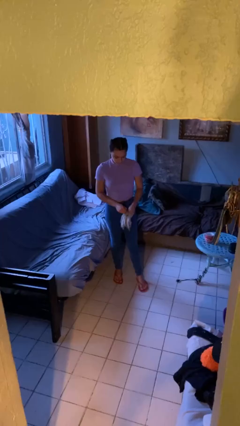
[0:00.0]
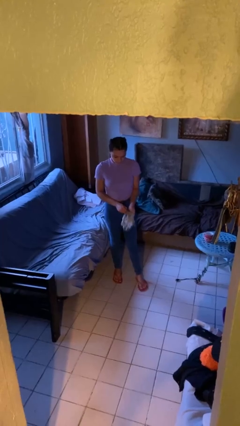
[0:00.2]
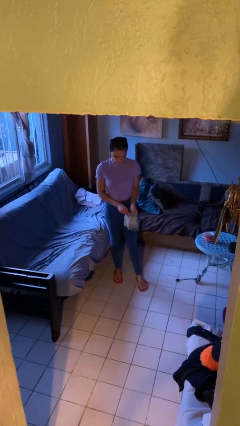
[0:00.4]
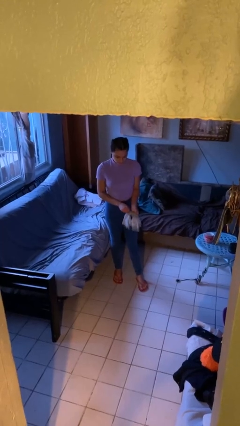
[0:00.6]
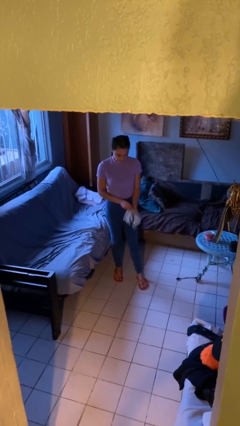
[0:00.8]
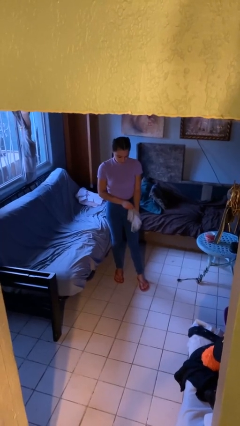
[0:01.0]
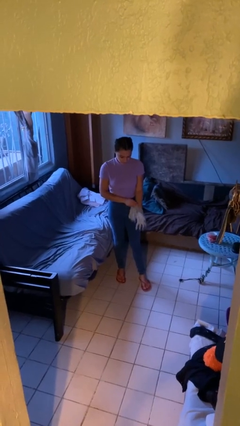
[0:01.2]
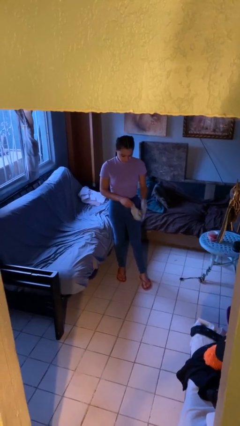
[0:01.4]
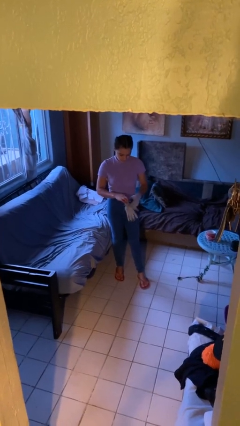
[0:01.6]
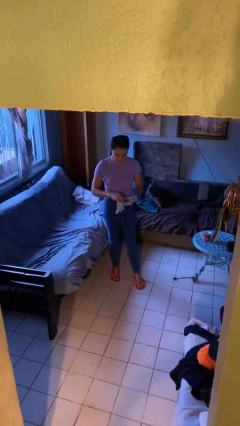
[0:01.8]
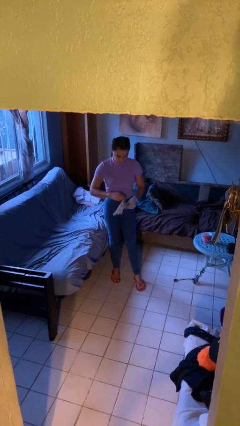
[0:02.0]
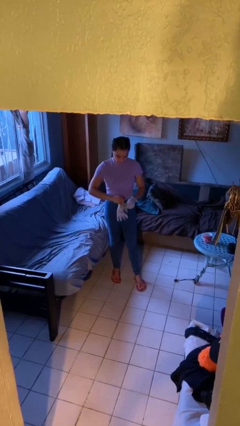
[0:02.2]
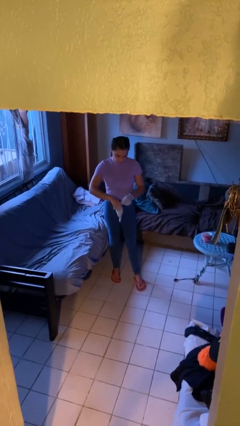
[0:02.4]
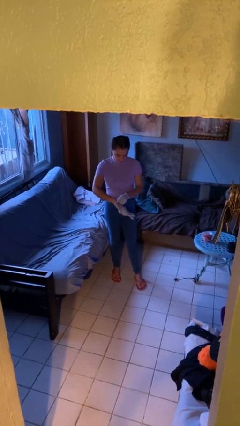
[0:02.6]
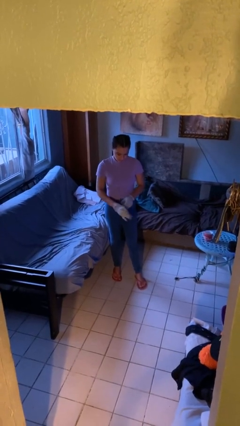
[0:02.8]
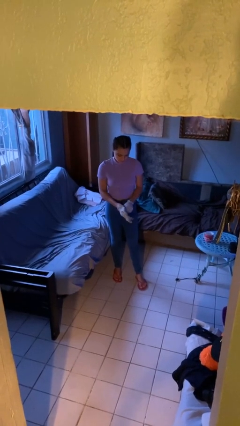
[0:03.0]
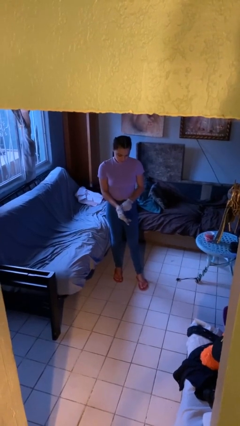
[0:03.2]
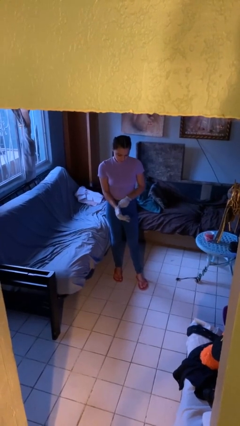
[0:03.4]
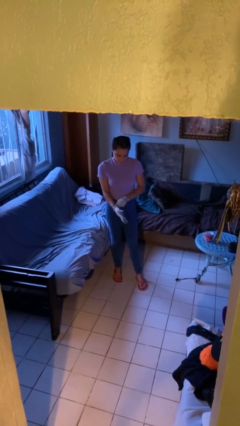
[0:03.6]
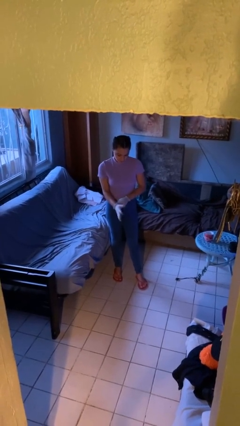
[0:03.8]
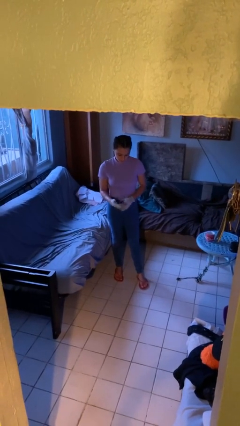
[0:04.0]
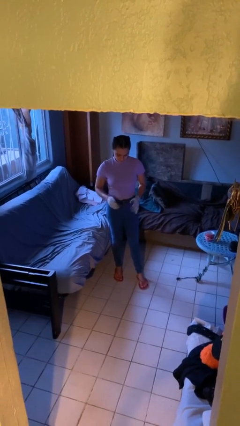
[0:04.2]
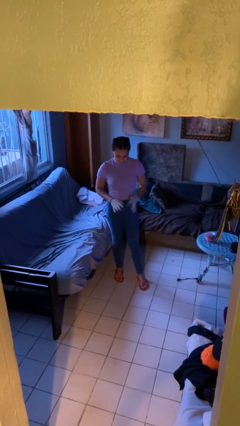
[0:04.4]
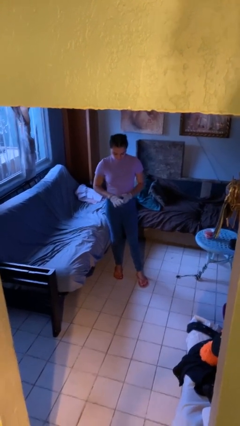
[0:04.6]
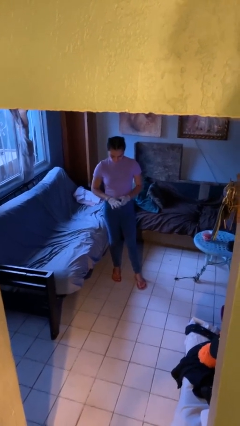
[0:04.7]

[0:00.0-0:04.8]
person puts on gloves

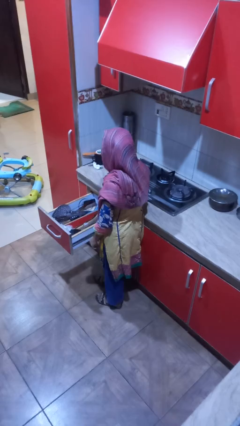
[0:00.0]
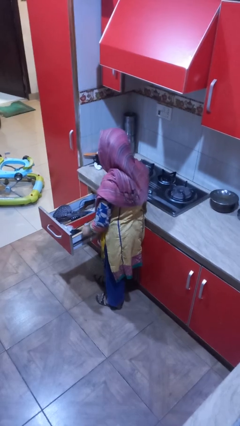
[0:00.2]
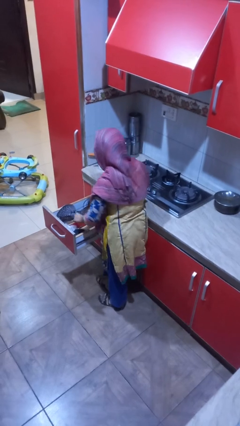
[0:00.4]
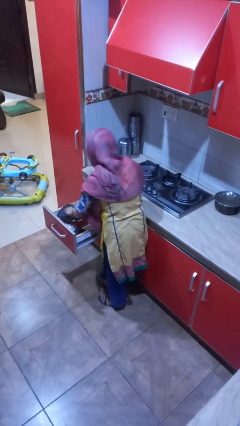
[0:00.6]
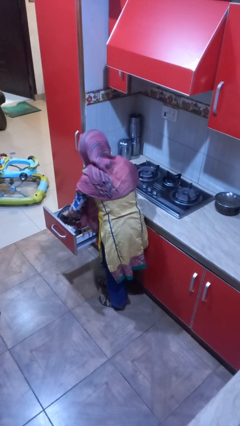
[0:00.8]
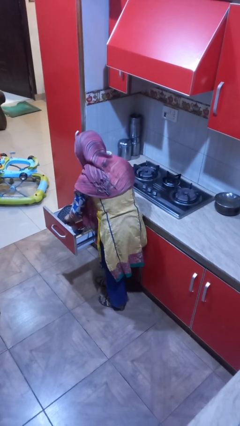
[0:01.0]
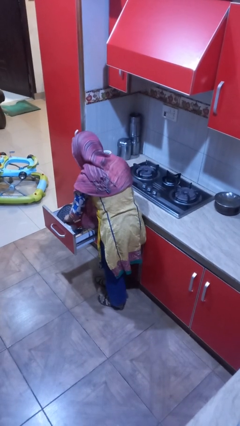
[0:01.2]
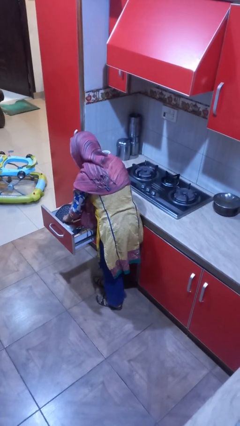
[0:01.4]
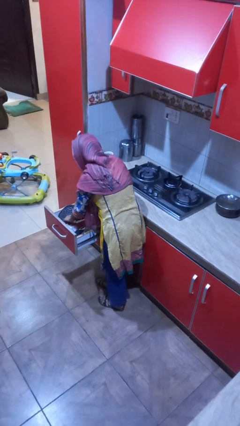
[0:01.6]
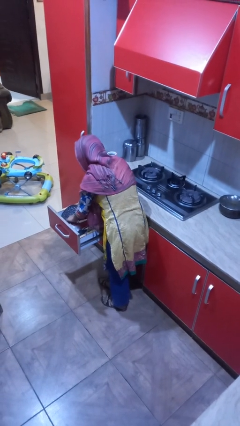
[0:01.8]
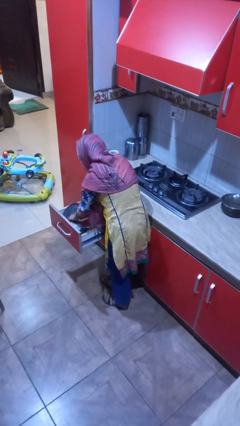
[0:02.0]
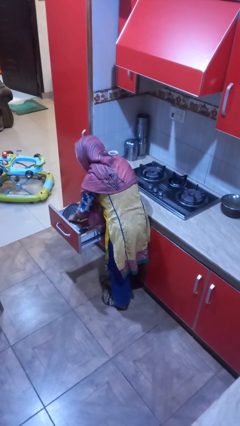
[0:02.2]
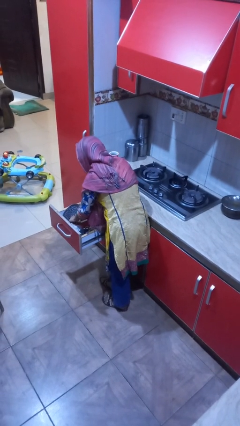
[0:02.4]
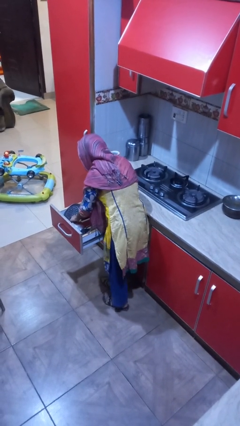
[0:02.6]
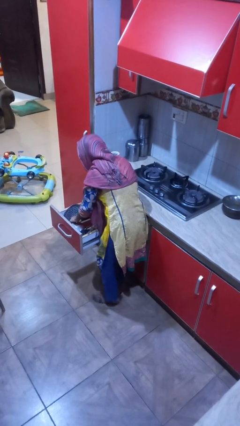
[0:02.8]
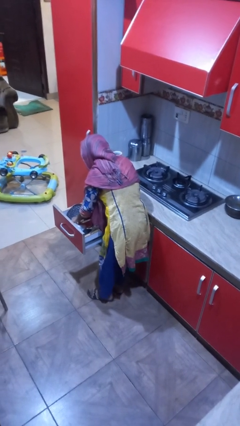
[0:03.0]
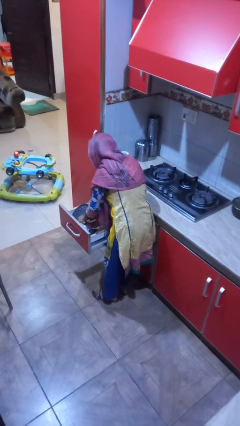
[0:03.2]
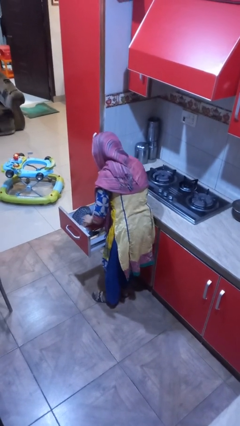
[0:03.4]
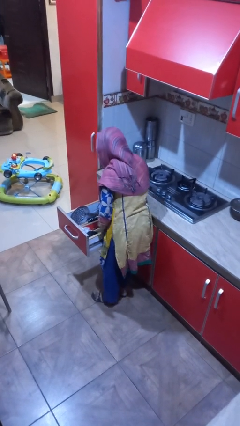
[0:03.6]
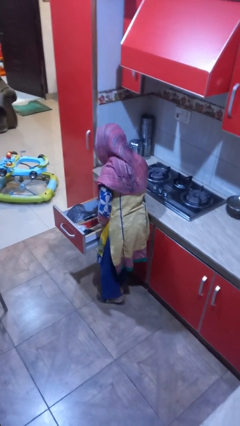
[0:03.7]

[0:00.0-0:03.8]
person searches in kitchen drawer

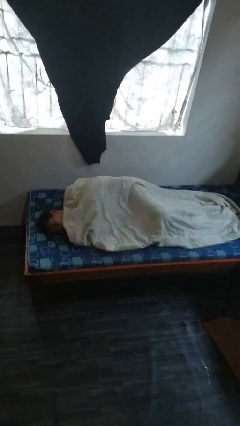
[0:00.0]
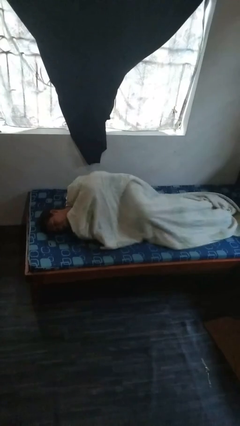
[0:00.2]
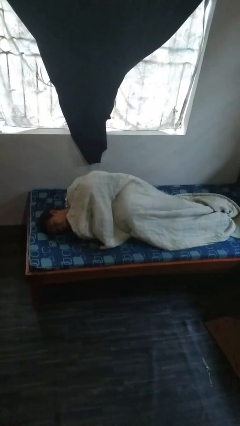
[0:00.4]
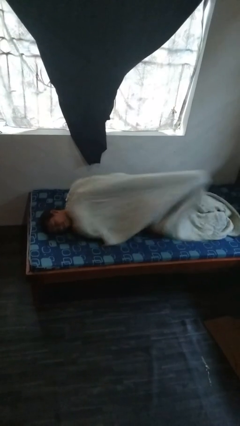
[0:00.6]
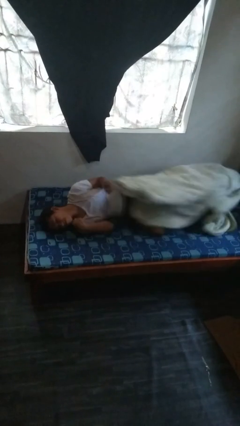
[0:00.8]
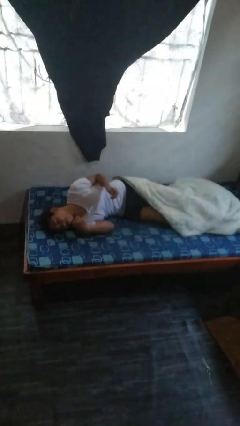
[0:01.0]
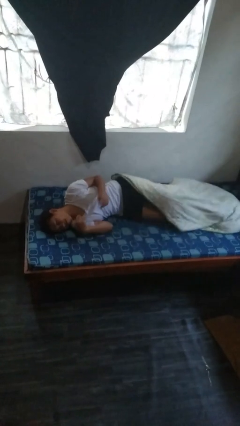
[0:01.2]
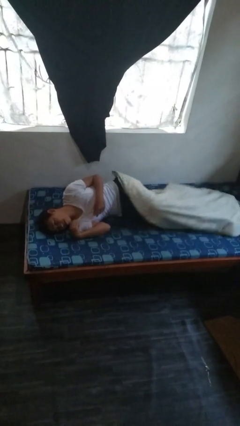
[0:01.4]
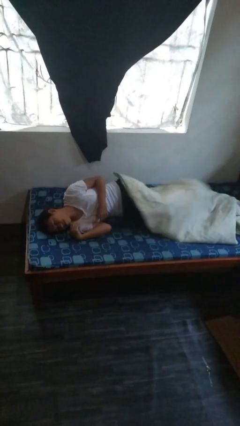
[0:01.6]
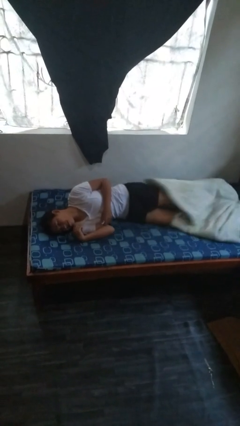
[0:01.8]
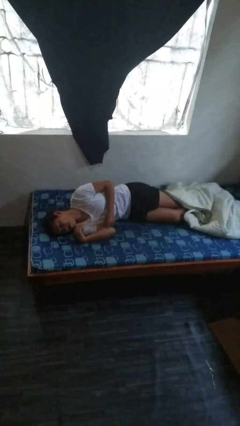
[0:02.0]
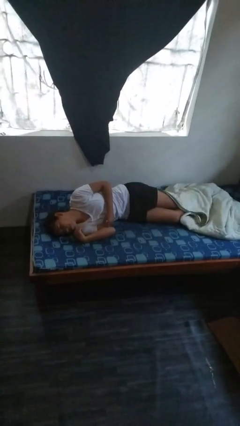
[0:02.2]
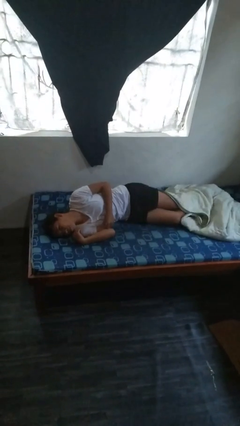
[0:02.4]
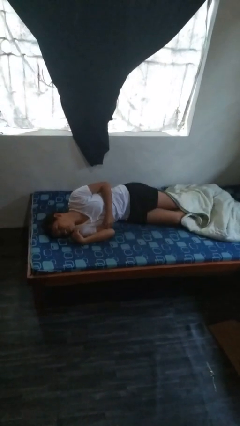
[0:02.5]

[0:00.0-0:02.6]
person uncovers with bedsheets

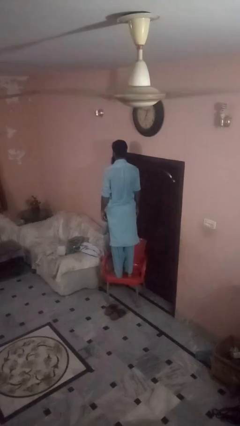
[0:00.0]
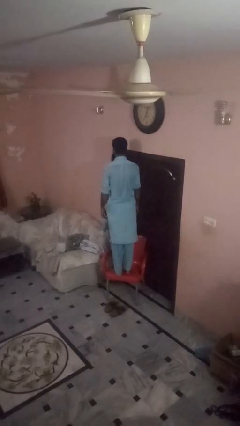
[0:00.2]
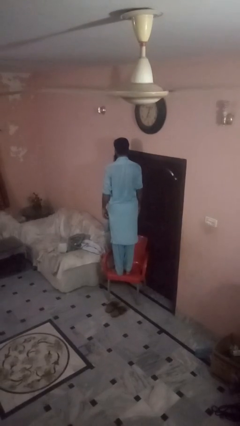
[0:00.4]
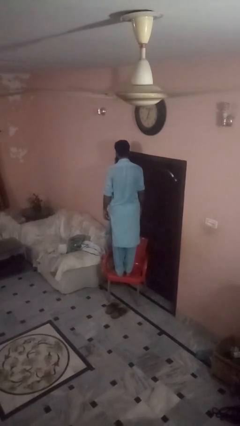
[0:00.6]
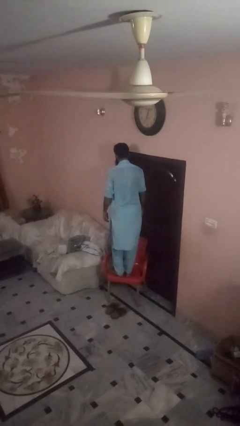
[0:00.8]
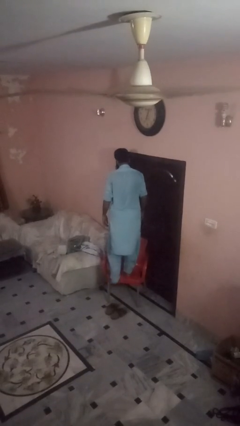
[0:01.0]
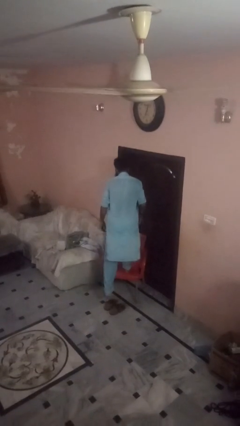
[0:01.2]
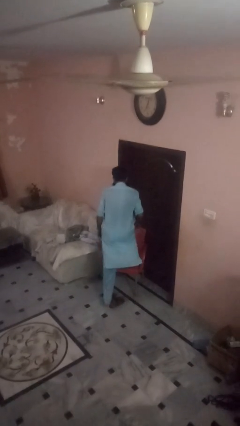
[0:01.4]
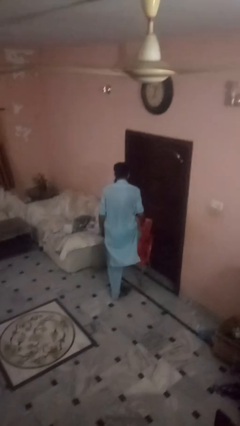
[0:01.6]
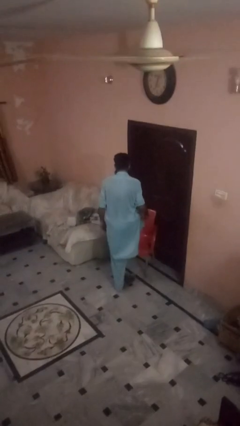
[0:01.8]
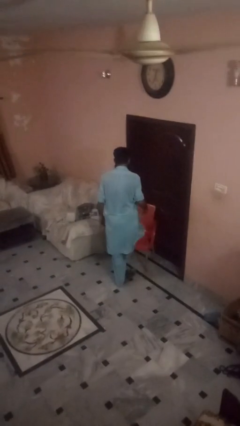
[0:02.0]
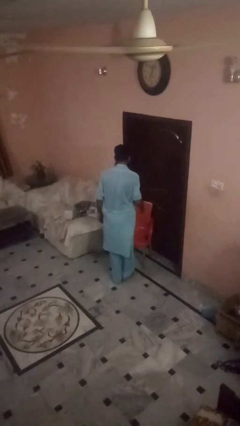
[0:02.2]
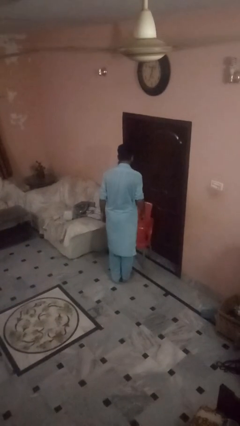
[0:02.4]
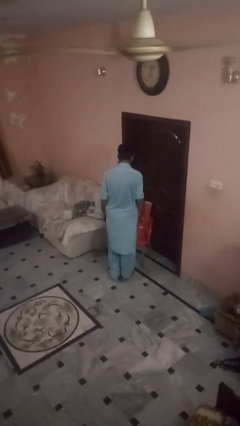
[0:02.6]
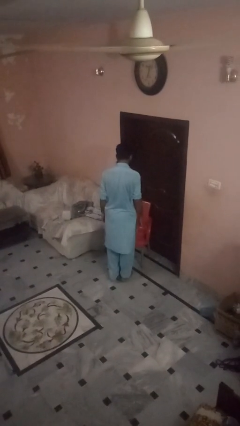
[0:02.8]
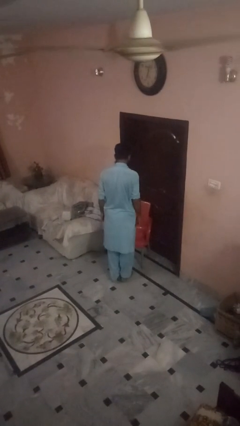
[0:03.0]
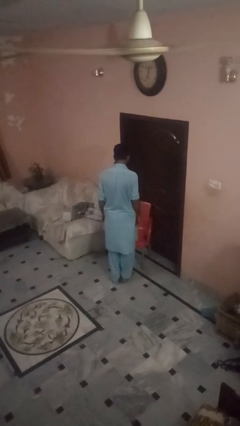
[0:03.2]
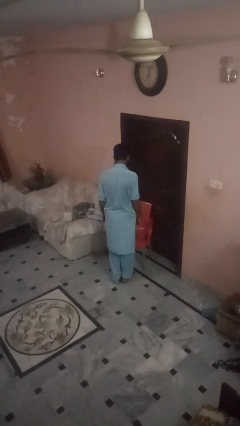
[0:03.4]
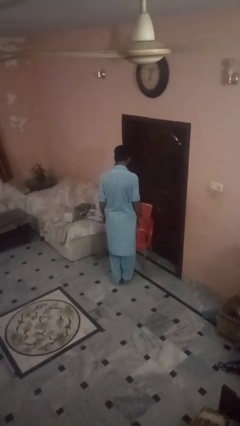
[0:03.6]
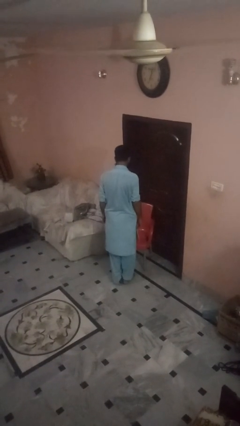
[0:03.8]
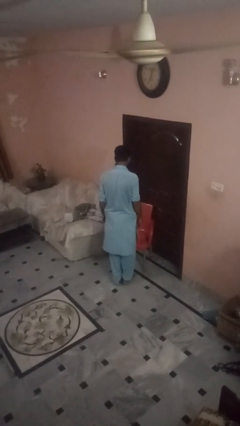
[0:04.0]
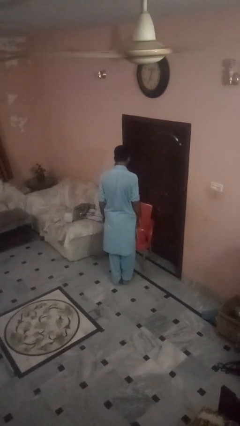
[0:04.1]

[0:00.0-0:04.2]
person climbs off chair

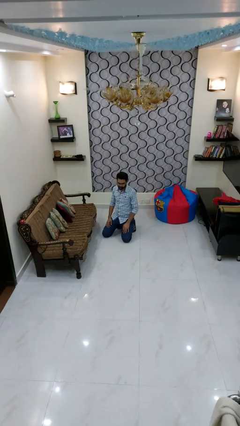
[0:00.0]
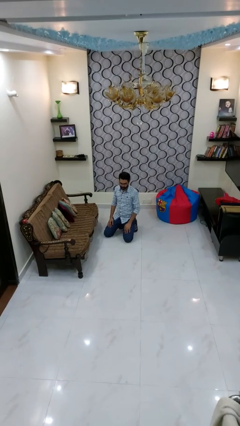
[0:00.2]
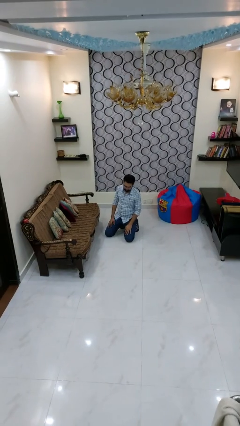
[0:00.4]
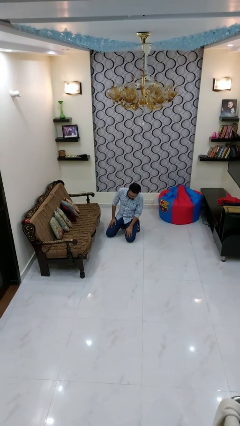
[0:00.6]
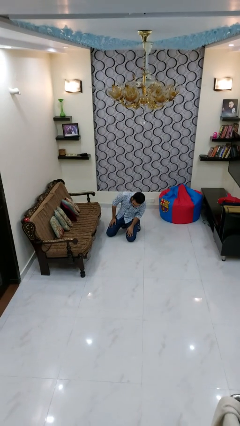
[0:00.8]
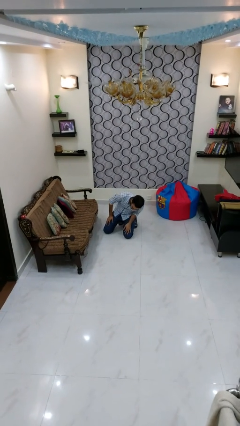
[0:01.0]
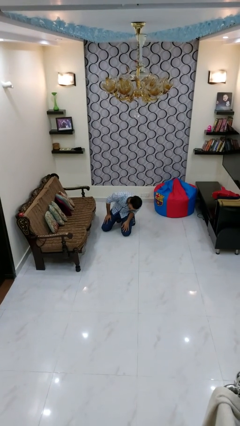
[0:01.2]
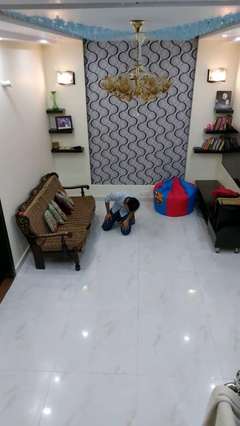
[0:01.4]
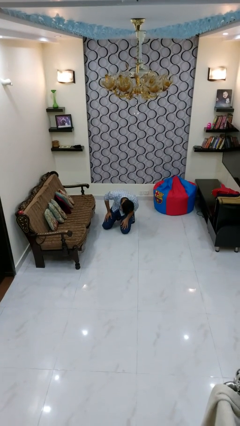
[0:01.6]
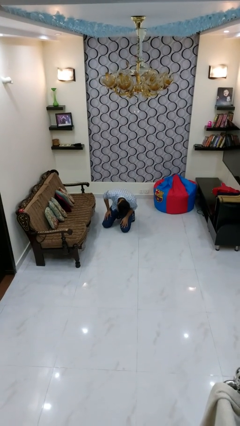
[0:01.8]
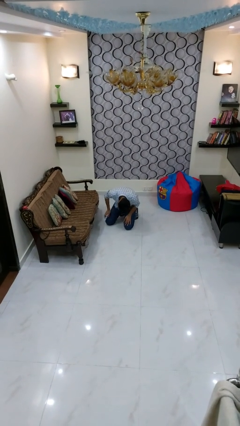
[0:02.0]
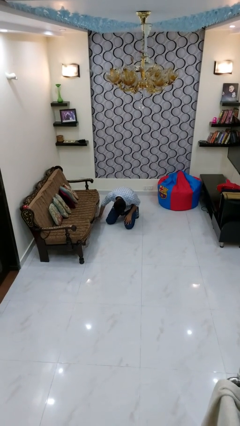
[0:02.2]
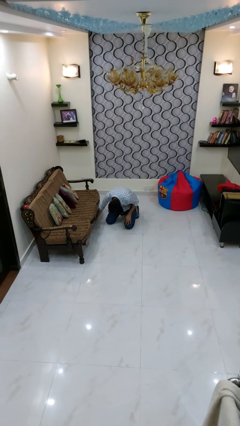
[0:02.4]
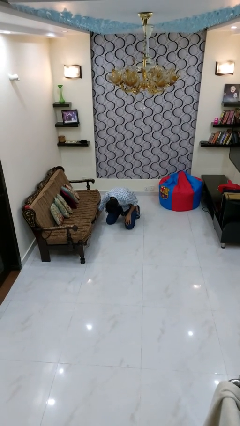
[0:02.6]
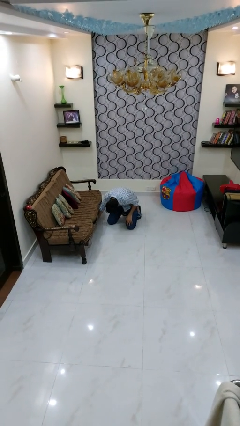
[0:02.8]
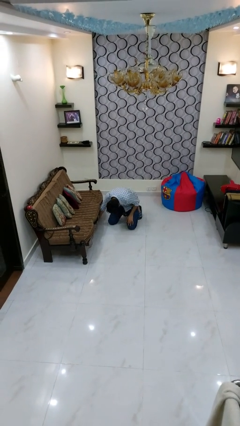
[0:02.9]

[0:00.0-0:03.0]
person searches under couch
